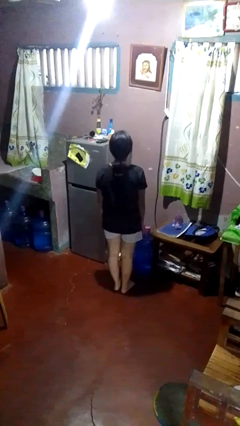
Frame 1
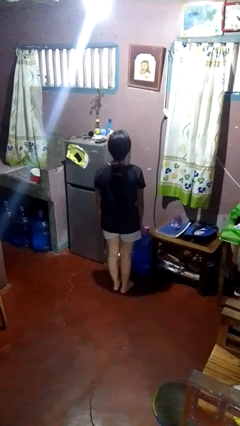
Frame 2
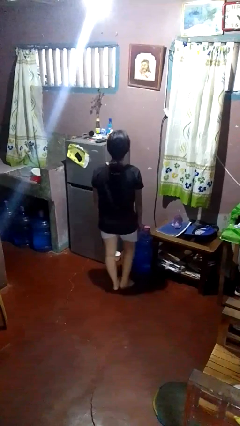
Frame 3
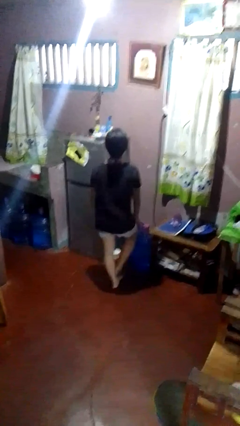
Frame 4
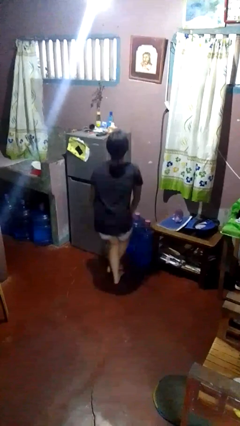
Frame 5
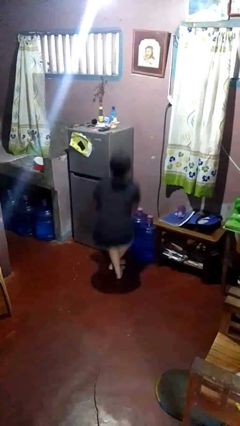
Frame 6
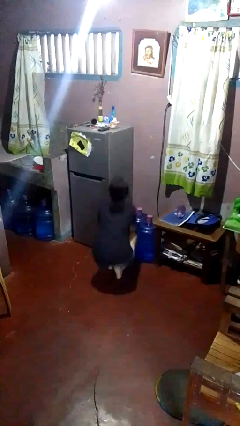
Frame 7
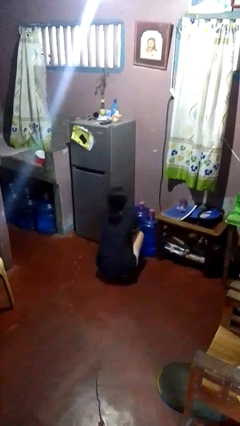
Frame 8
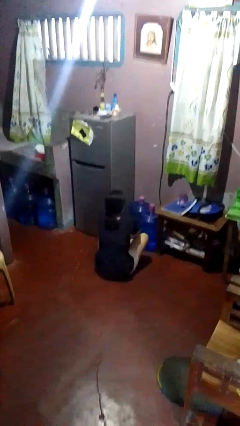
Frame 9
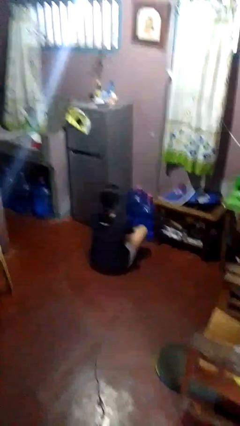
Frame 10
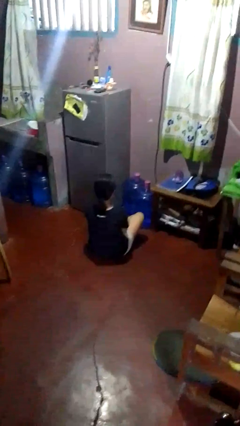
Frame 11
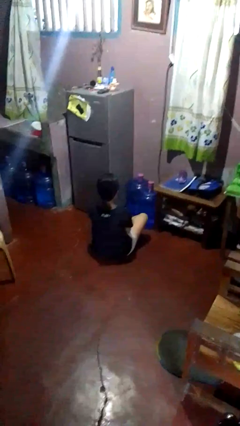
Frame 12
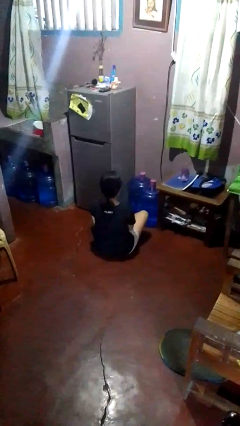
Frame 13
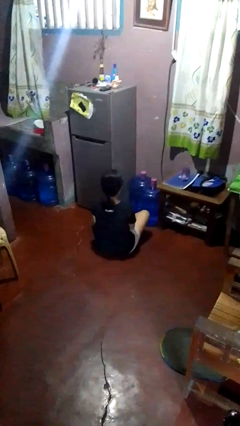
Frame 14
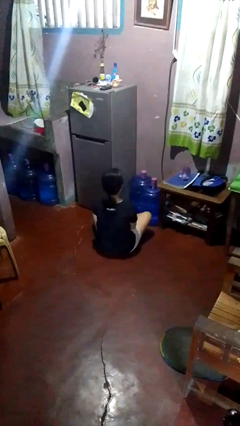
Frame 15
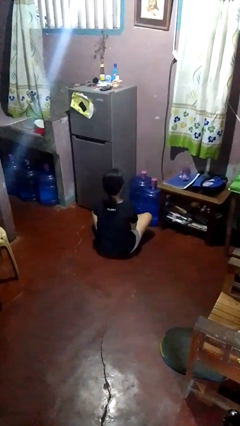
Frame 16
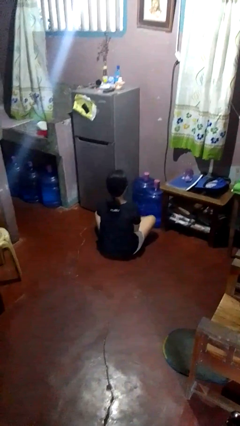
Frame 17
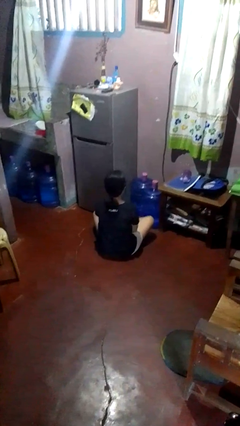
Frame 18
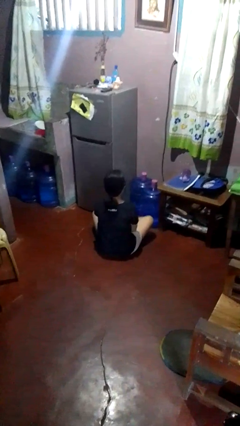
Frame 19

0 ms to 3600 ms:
person sits crisscross

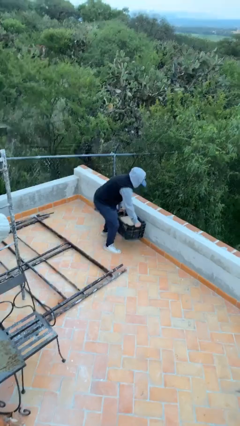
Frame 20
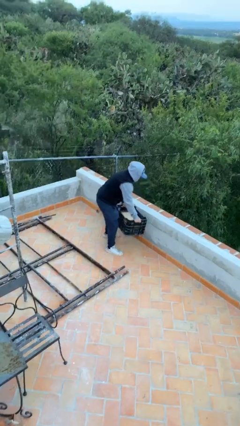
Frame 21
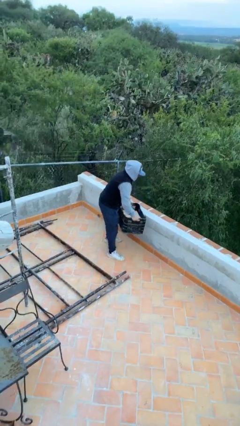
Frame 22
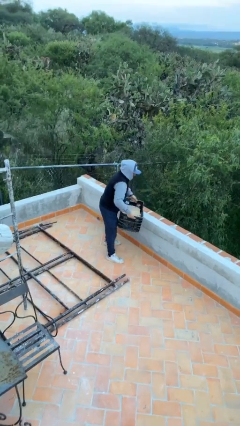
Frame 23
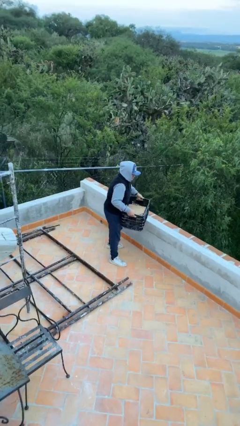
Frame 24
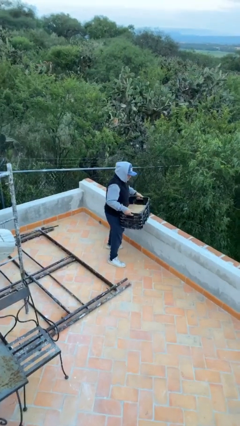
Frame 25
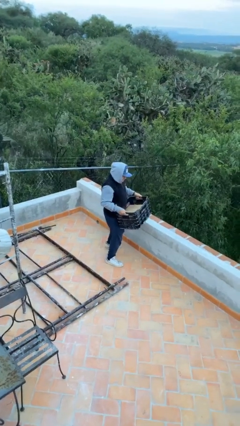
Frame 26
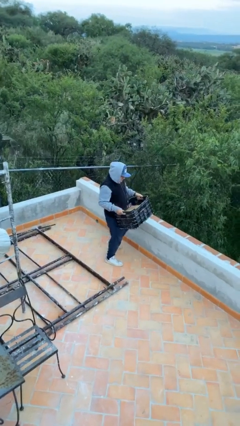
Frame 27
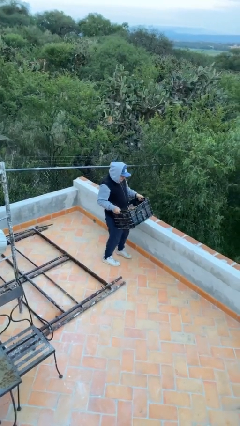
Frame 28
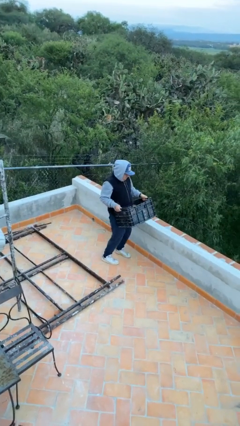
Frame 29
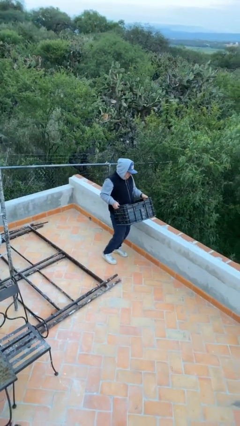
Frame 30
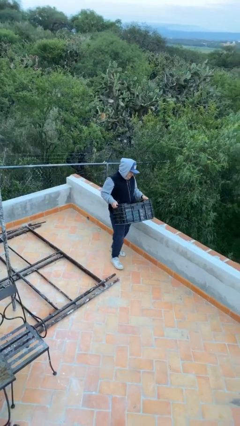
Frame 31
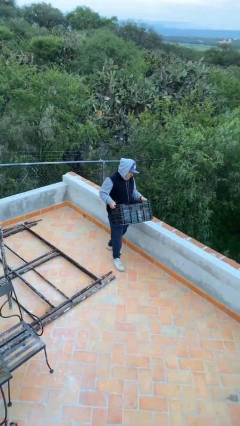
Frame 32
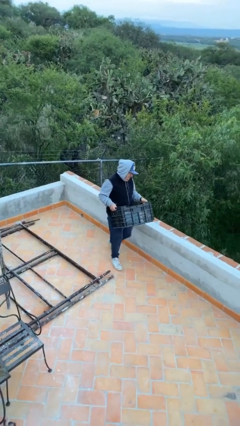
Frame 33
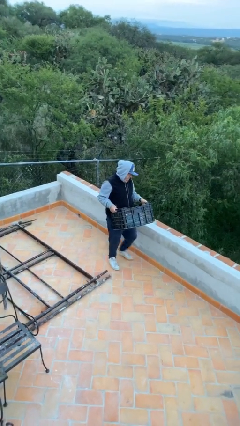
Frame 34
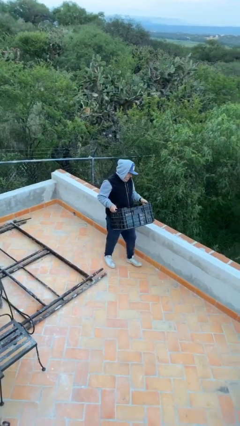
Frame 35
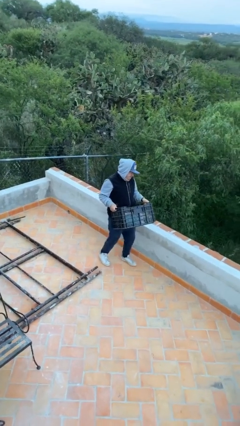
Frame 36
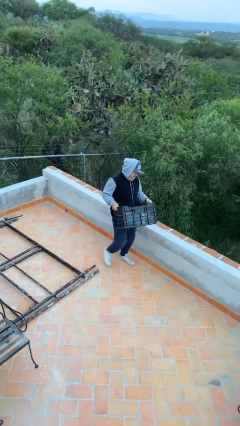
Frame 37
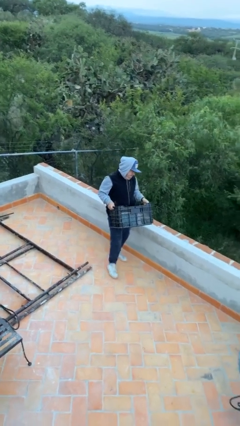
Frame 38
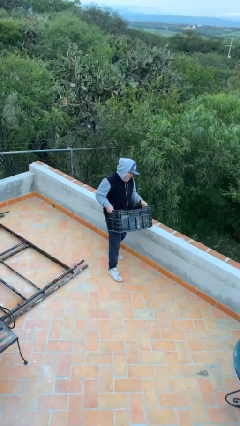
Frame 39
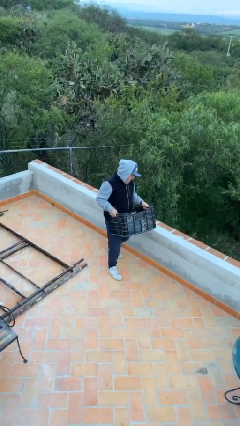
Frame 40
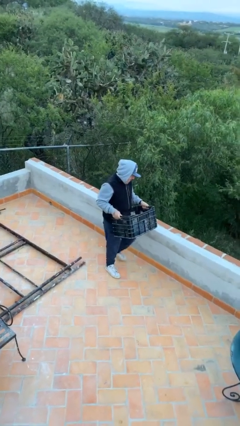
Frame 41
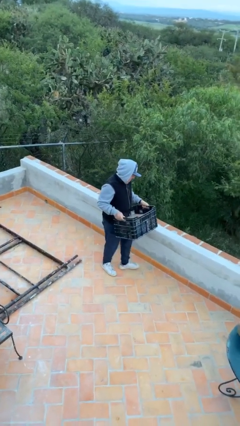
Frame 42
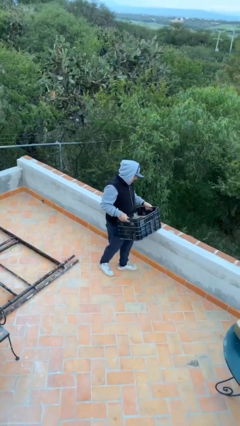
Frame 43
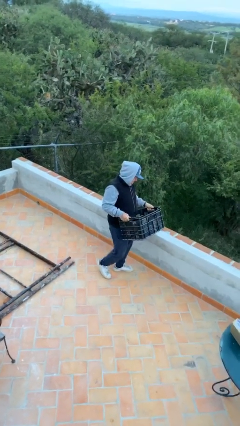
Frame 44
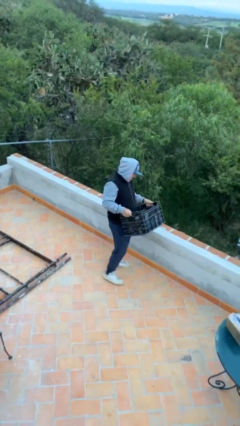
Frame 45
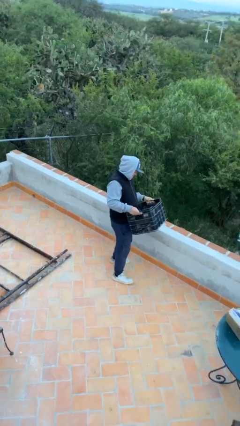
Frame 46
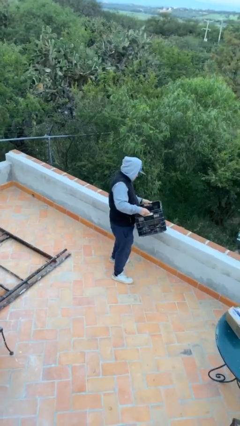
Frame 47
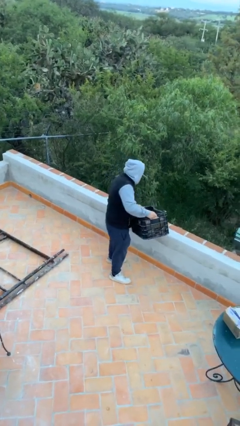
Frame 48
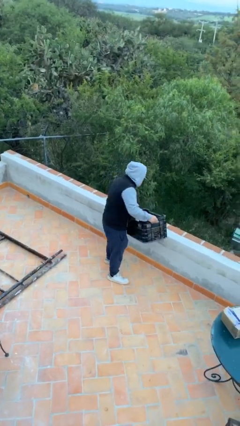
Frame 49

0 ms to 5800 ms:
person carries heavy object

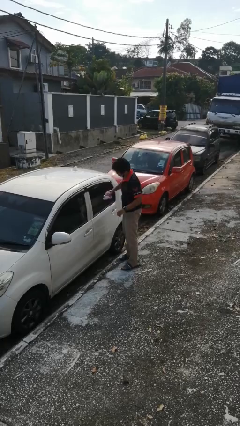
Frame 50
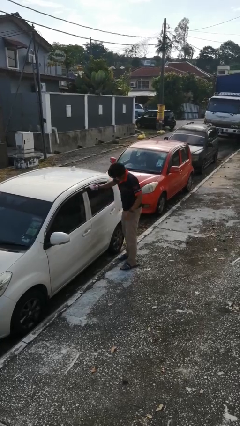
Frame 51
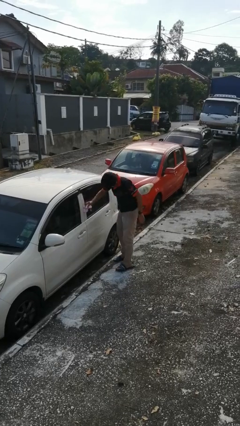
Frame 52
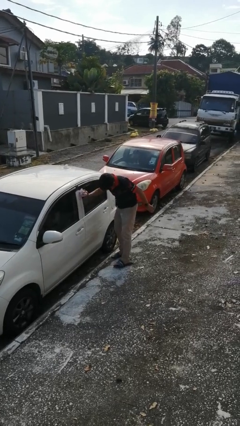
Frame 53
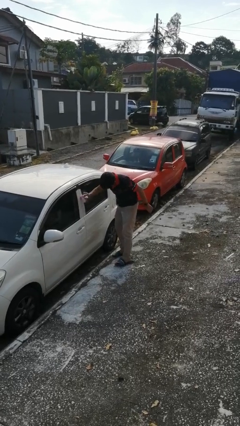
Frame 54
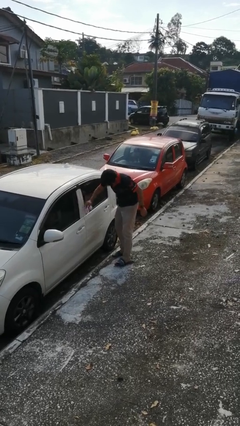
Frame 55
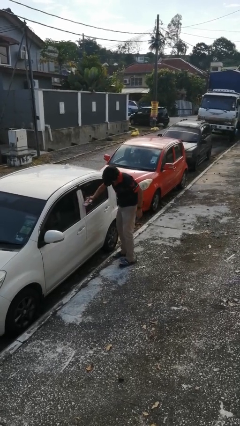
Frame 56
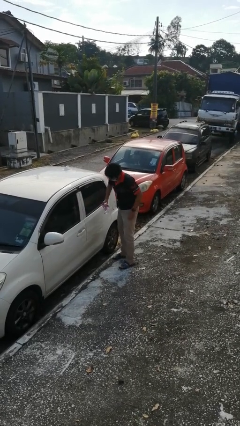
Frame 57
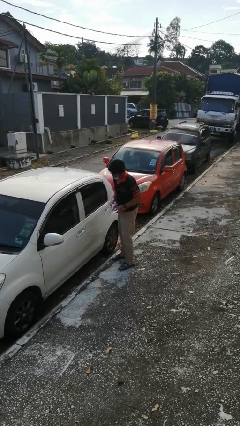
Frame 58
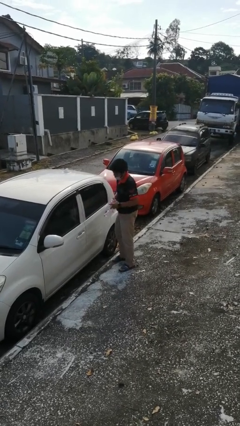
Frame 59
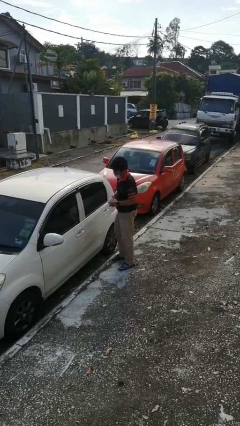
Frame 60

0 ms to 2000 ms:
person polishes car with rag

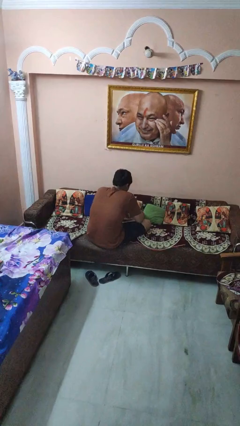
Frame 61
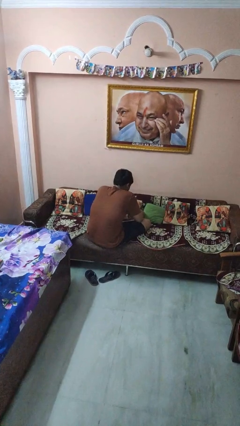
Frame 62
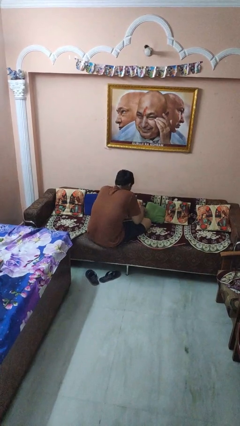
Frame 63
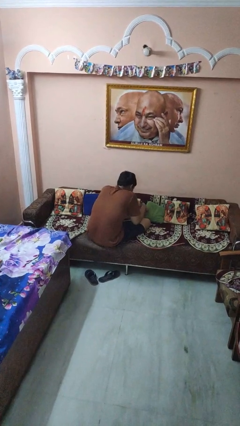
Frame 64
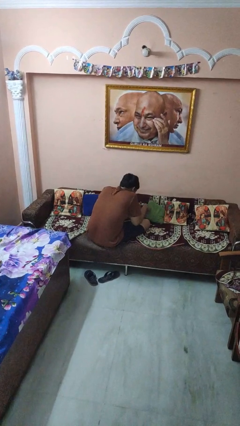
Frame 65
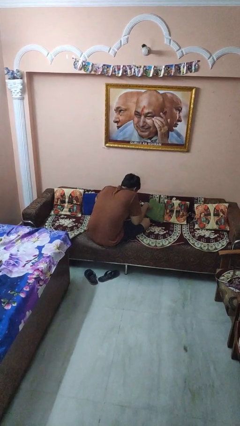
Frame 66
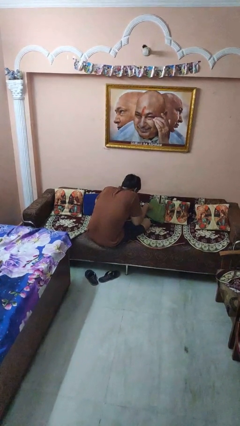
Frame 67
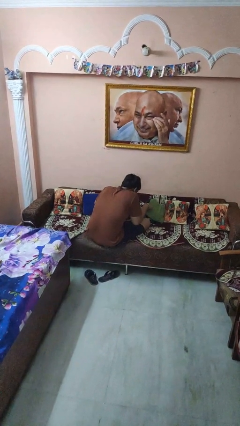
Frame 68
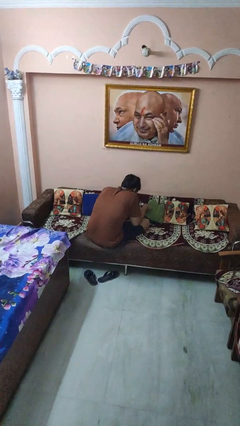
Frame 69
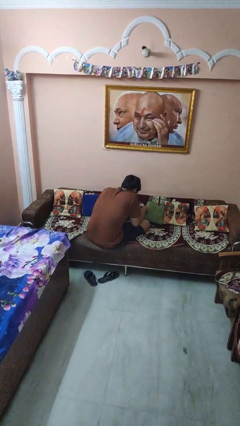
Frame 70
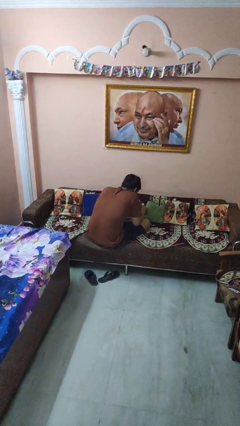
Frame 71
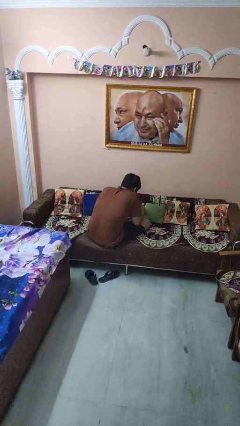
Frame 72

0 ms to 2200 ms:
person searches in couch

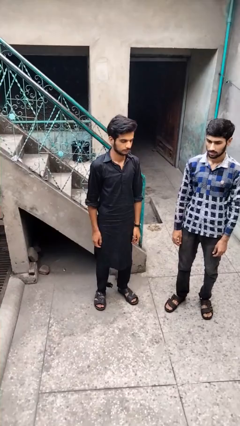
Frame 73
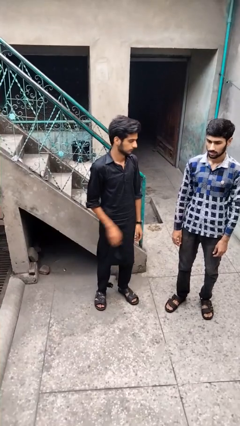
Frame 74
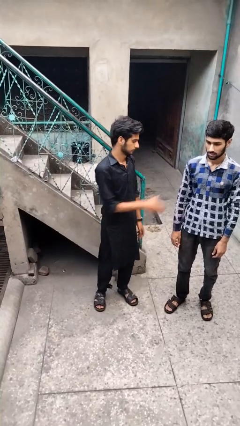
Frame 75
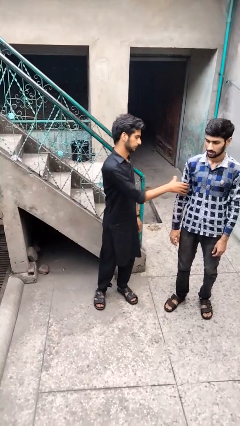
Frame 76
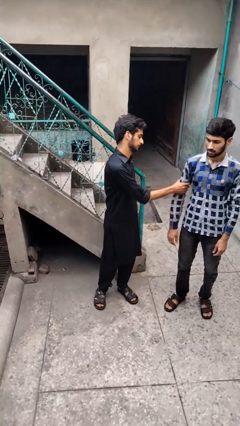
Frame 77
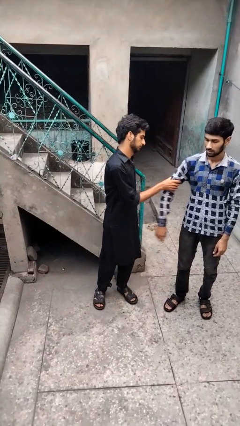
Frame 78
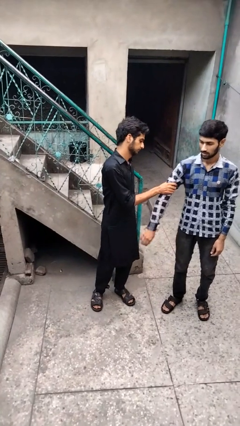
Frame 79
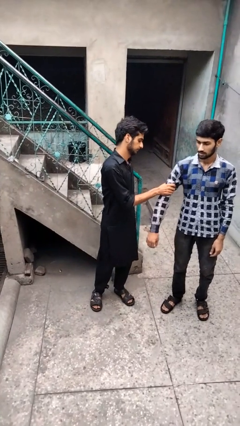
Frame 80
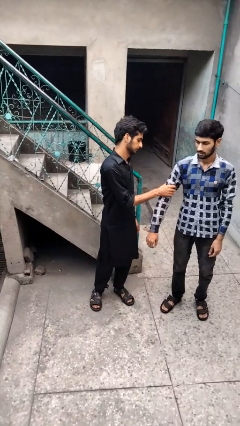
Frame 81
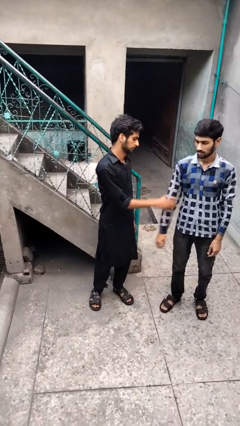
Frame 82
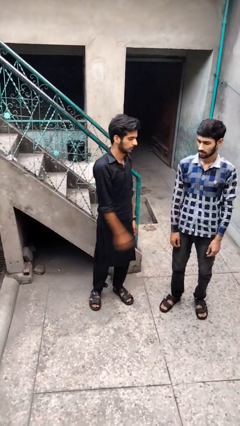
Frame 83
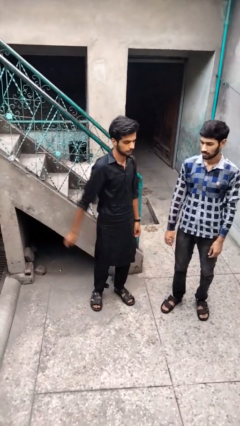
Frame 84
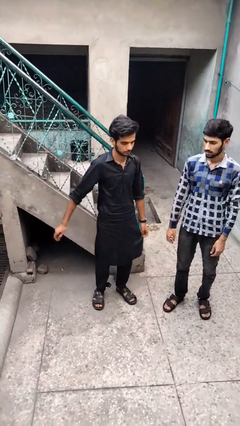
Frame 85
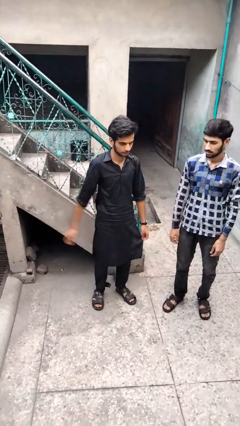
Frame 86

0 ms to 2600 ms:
person grabs person by bicep

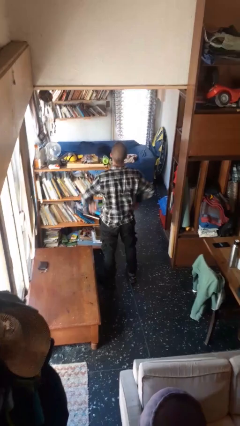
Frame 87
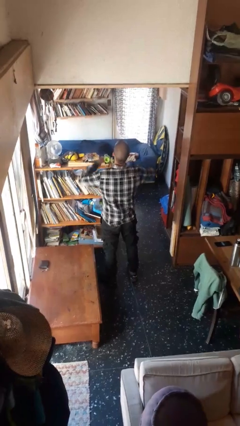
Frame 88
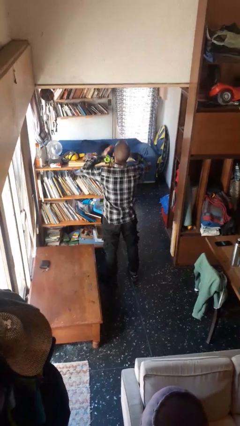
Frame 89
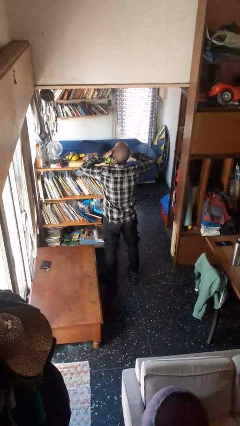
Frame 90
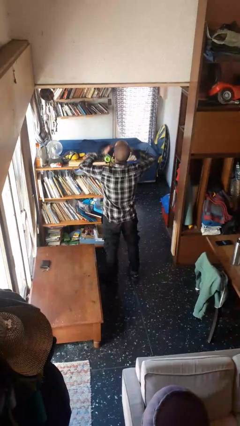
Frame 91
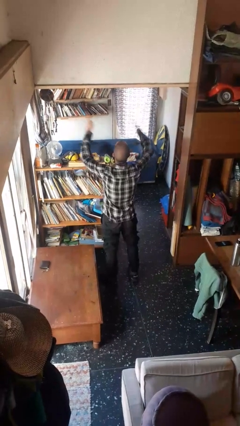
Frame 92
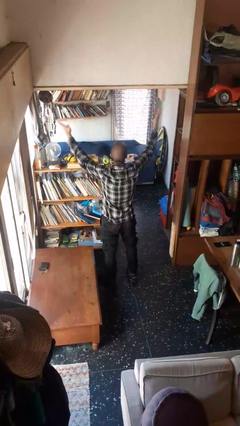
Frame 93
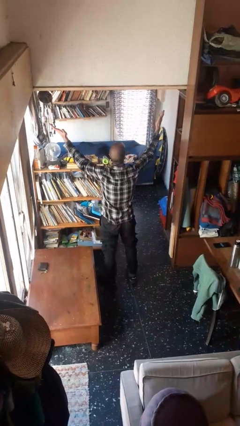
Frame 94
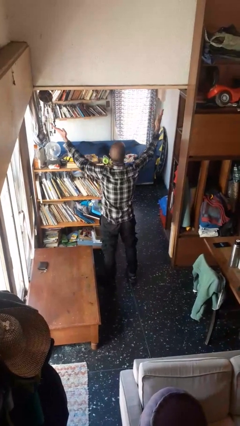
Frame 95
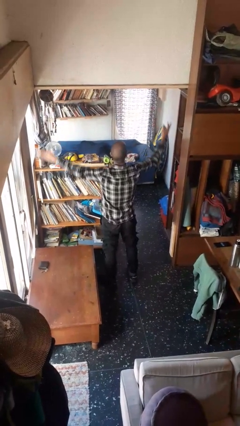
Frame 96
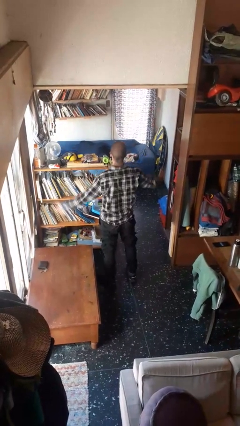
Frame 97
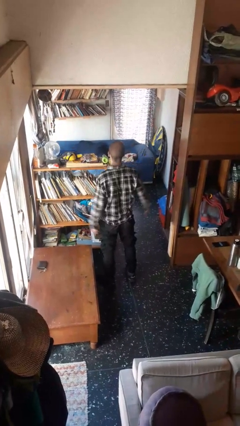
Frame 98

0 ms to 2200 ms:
person gestures blow kiss
